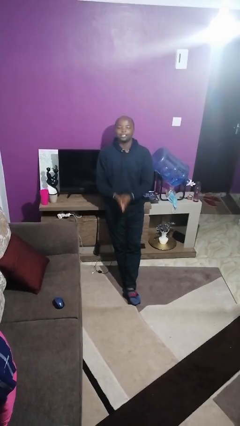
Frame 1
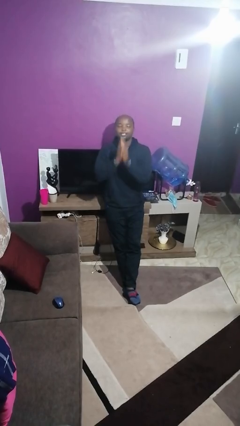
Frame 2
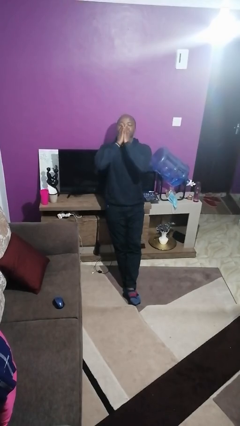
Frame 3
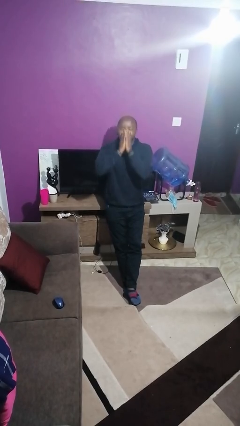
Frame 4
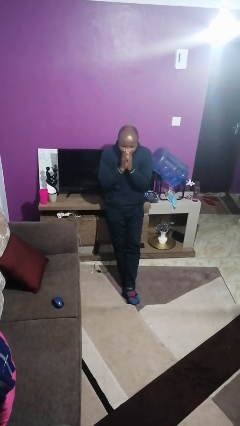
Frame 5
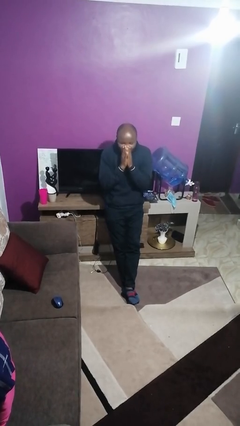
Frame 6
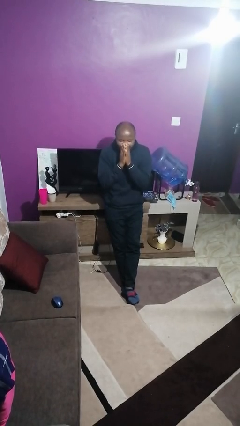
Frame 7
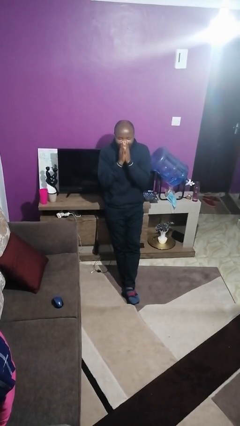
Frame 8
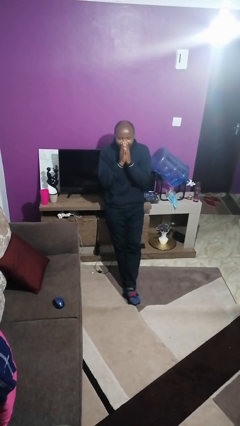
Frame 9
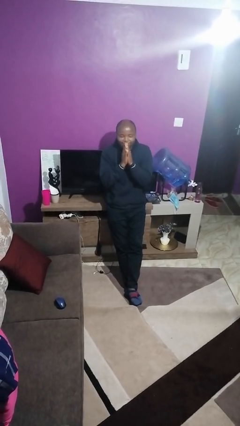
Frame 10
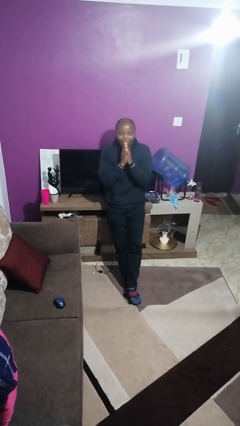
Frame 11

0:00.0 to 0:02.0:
person sneezes into hand

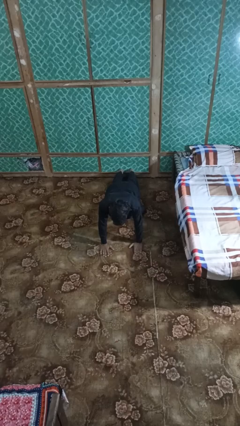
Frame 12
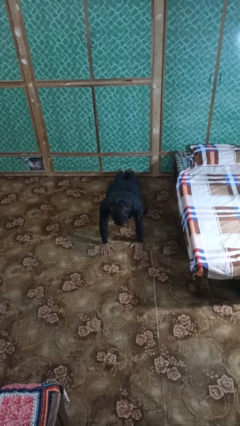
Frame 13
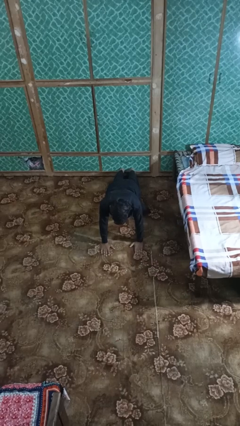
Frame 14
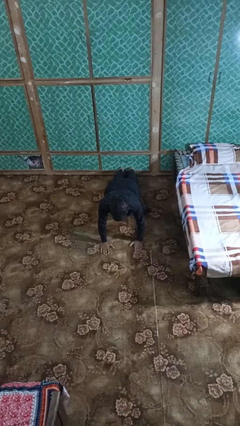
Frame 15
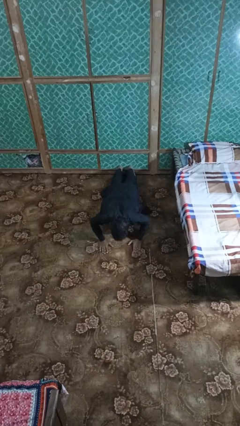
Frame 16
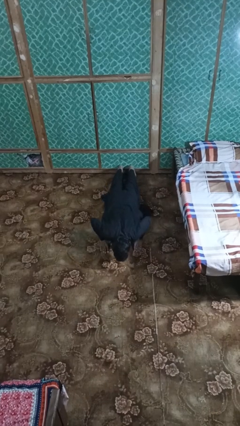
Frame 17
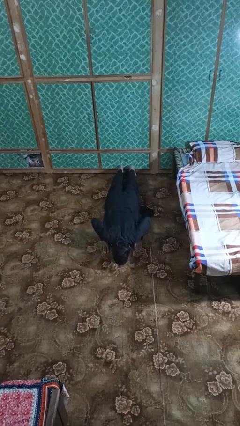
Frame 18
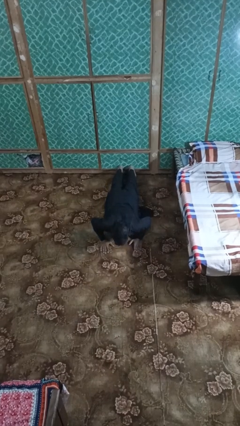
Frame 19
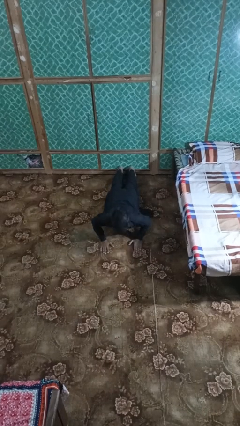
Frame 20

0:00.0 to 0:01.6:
person exercises with pushup

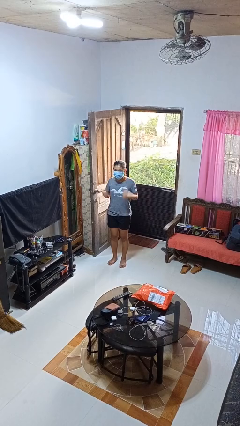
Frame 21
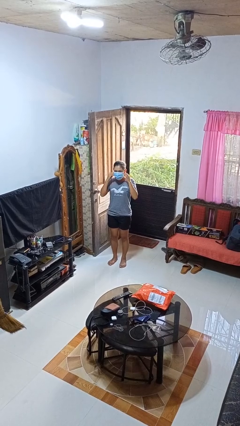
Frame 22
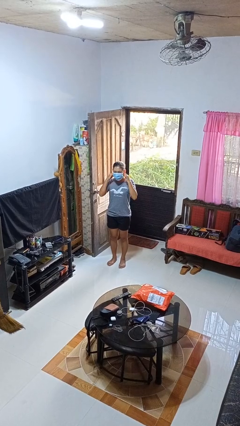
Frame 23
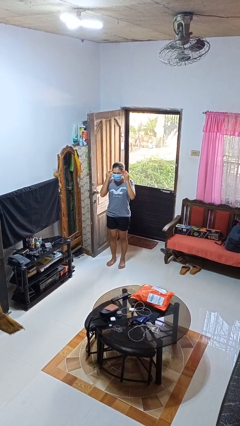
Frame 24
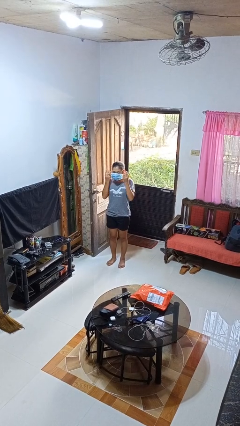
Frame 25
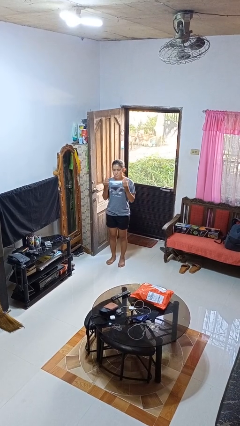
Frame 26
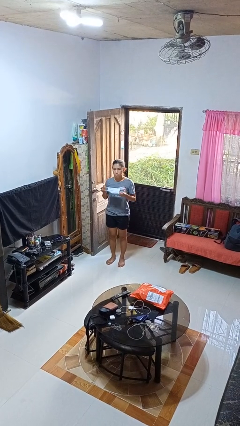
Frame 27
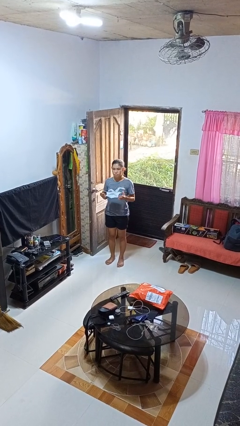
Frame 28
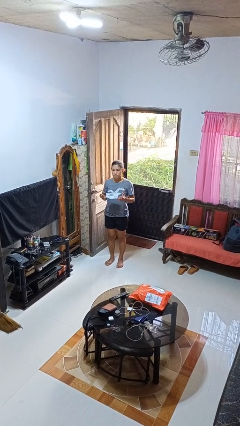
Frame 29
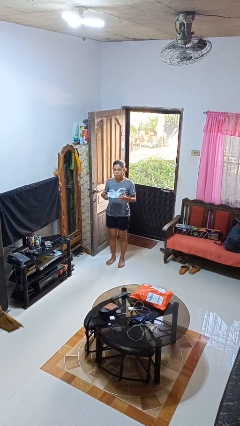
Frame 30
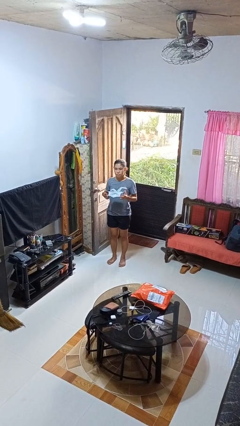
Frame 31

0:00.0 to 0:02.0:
person takes off facemask

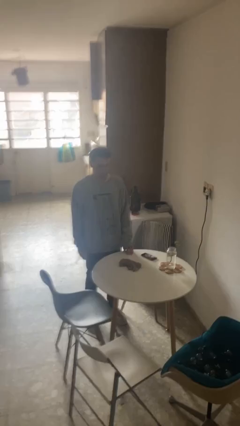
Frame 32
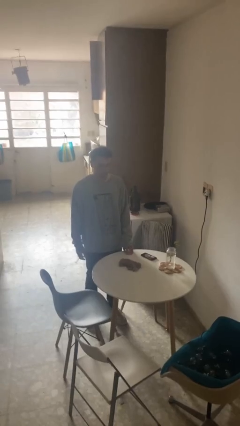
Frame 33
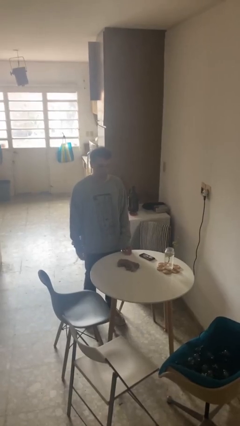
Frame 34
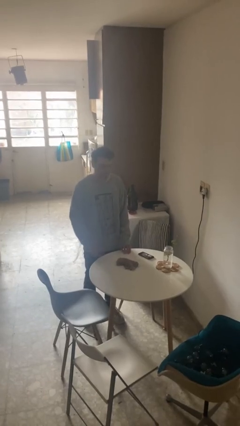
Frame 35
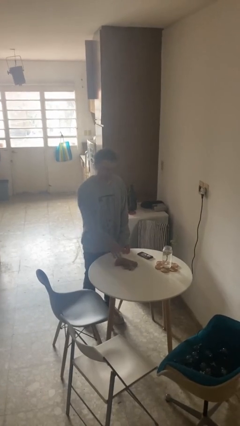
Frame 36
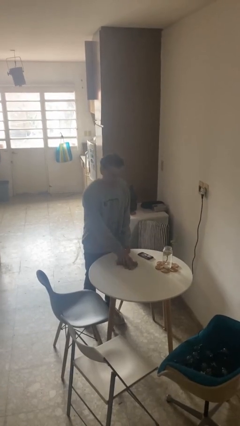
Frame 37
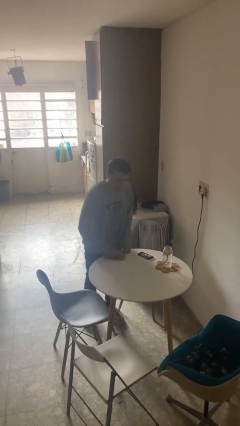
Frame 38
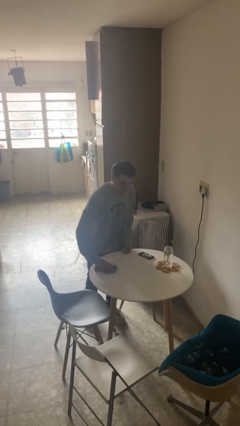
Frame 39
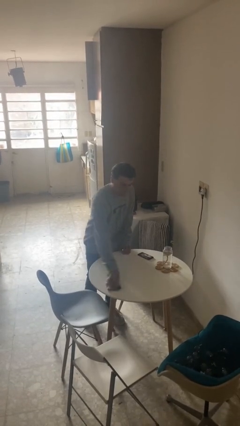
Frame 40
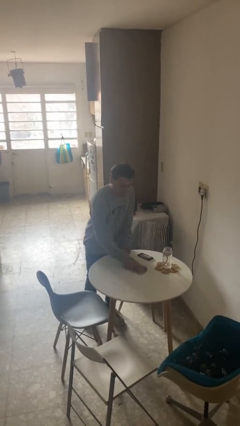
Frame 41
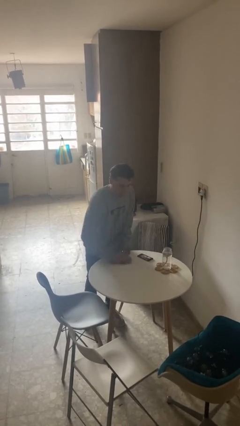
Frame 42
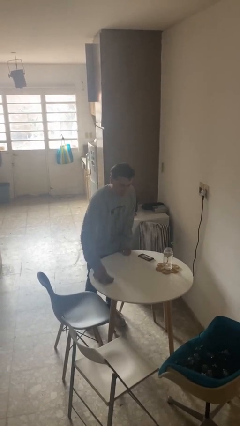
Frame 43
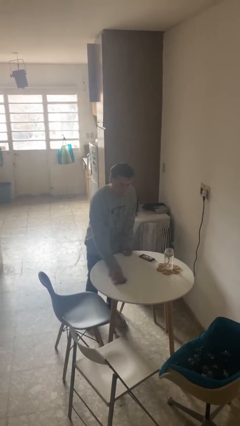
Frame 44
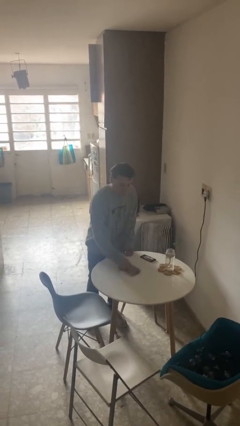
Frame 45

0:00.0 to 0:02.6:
person cleans table with rag

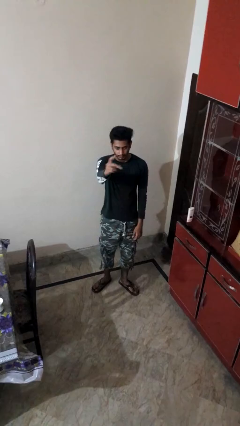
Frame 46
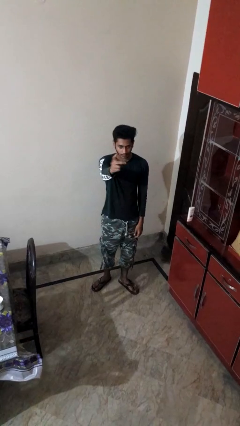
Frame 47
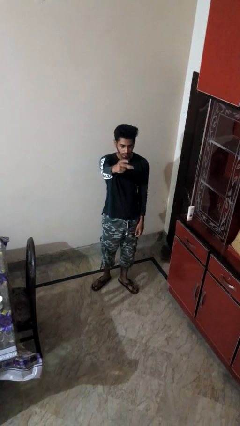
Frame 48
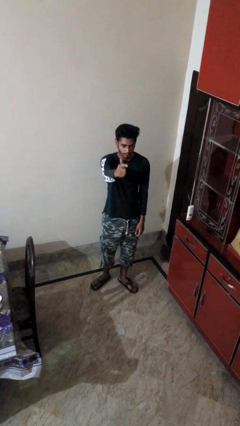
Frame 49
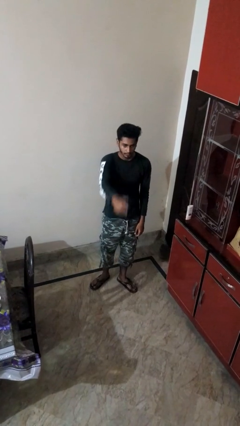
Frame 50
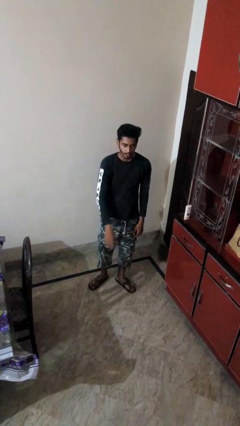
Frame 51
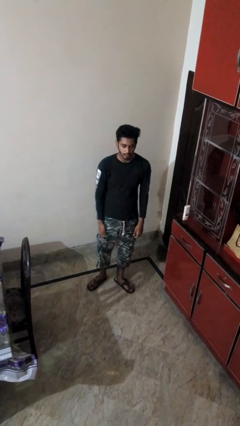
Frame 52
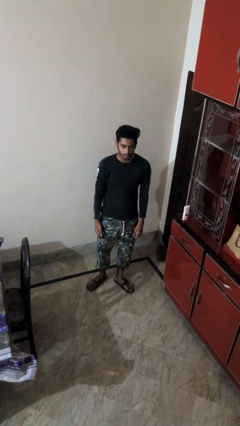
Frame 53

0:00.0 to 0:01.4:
person snaps fingers

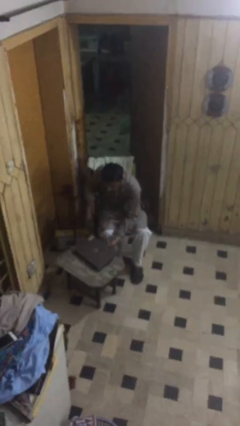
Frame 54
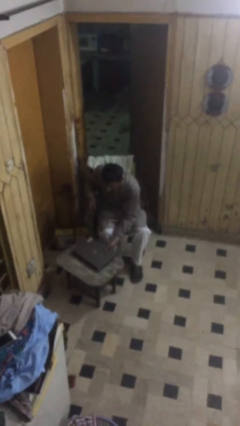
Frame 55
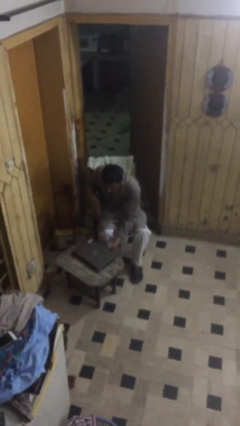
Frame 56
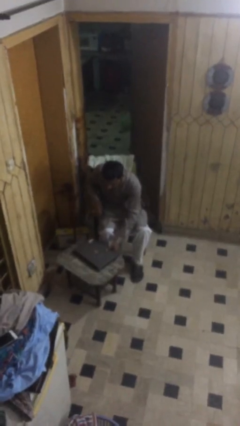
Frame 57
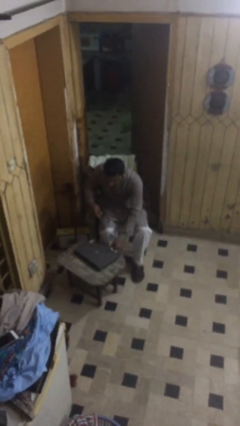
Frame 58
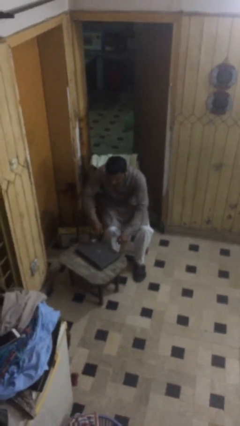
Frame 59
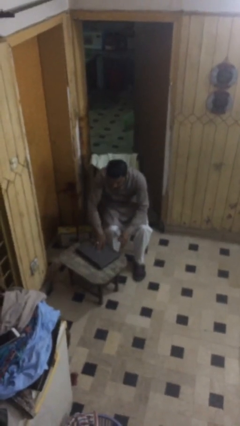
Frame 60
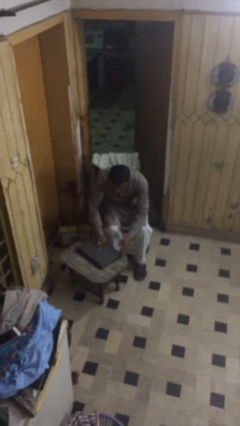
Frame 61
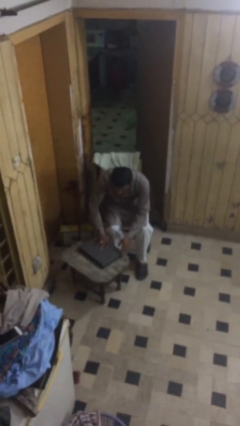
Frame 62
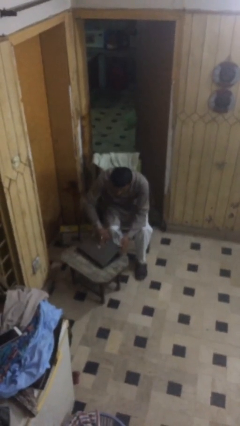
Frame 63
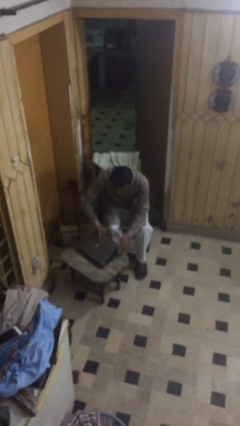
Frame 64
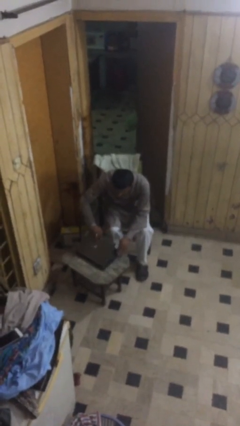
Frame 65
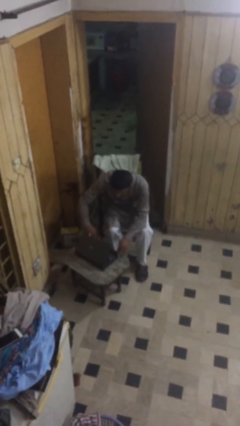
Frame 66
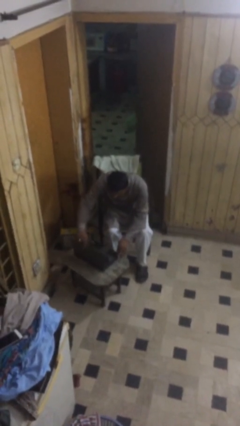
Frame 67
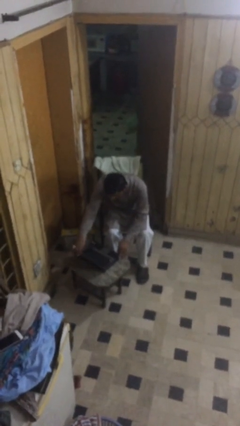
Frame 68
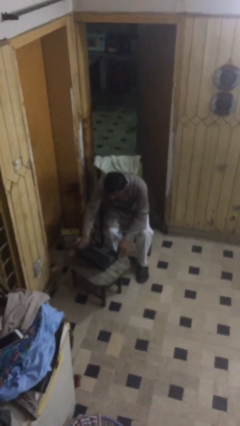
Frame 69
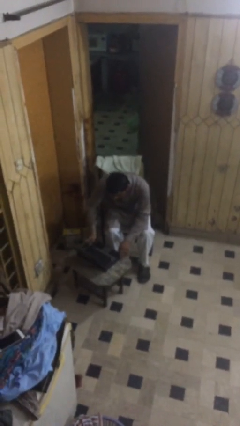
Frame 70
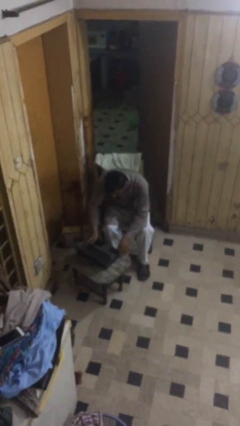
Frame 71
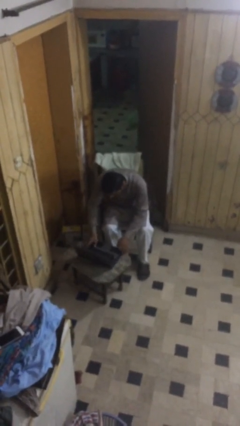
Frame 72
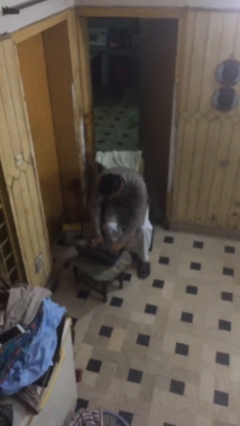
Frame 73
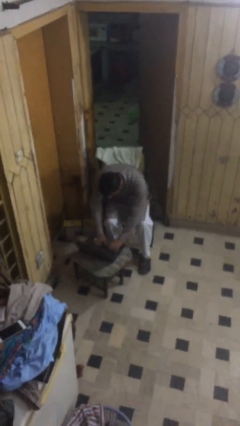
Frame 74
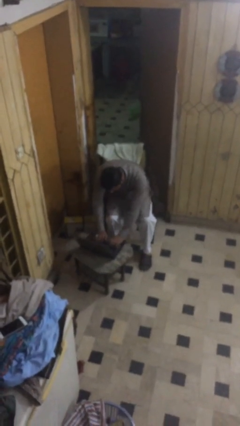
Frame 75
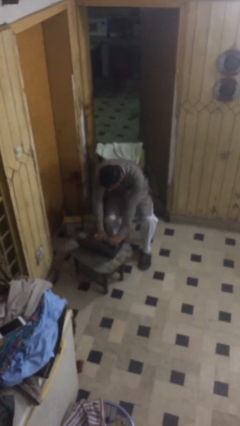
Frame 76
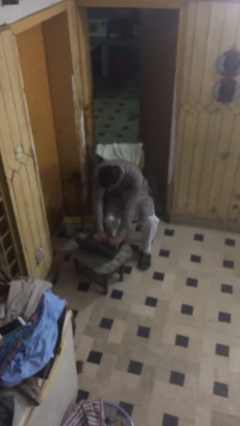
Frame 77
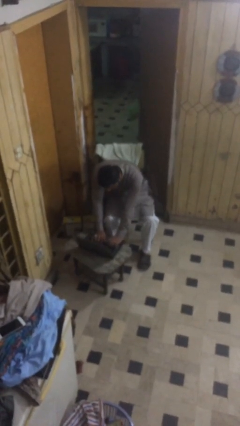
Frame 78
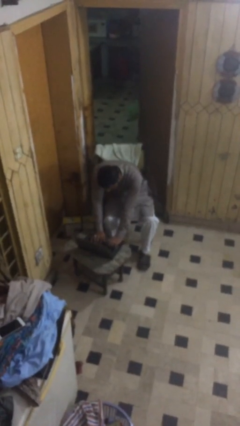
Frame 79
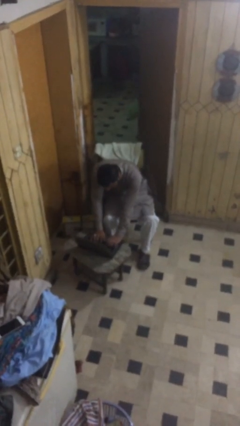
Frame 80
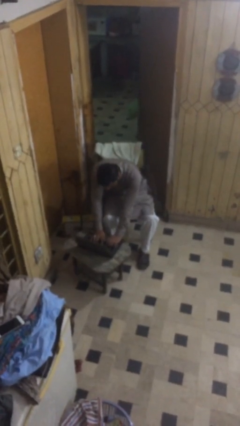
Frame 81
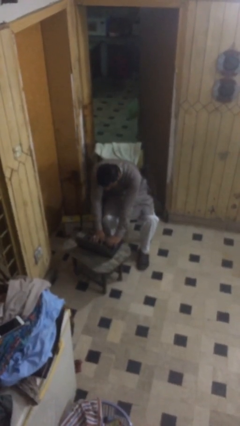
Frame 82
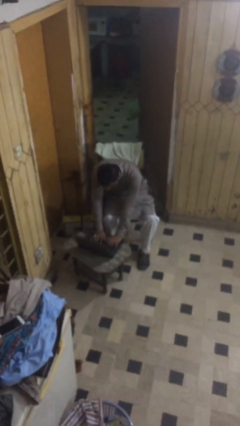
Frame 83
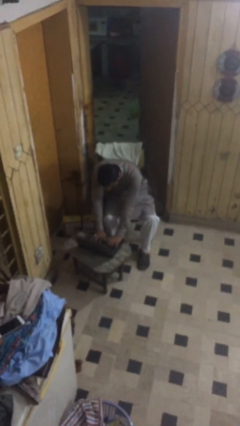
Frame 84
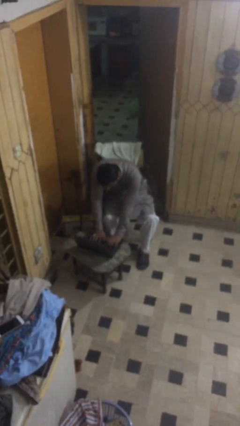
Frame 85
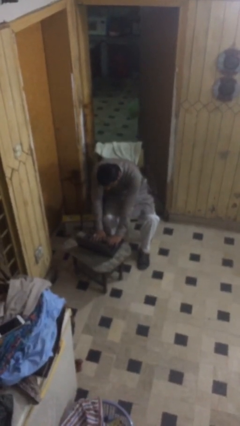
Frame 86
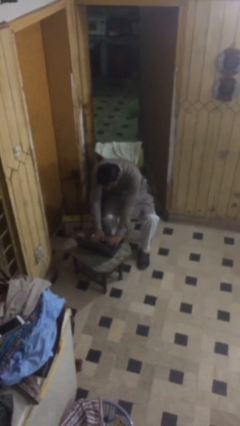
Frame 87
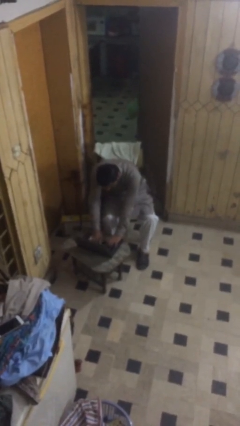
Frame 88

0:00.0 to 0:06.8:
person interacts with laptop

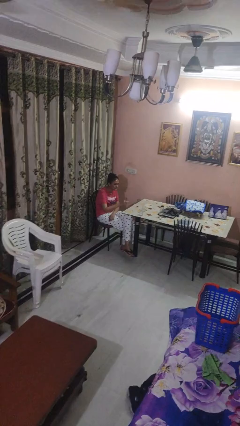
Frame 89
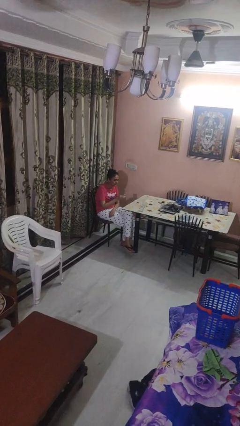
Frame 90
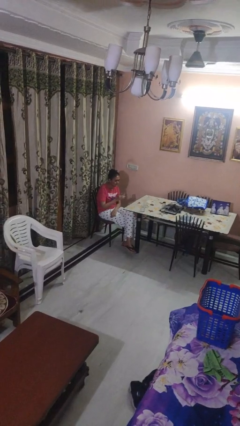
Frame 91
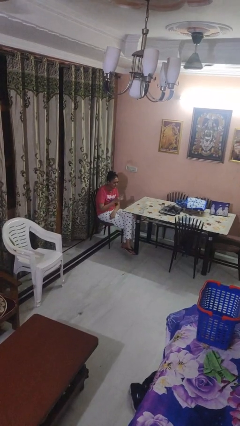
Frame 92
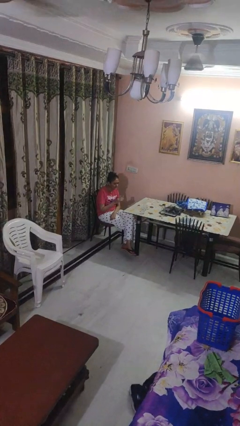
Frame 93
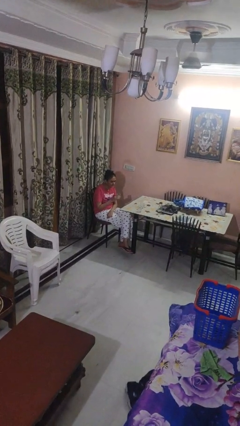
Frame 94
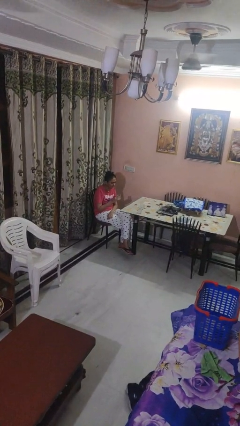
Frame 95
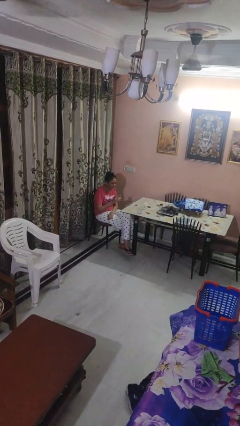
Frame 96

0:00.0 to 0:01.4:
person picks up object from table
